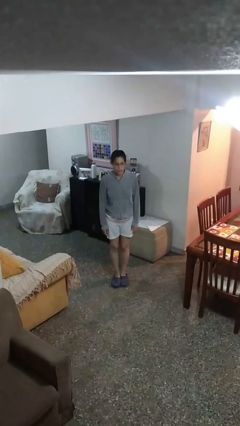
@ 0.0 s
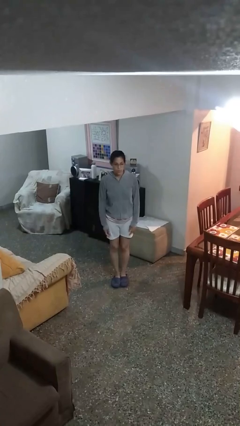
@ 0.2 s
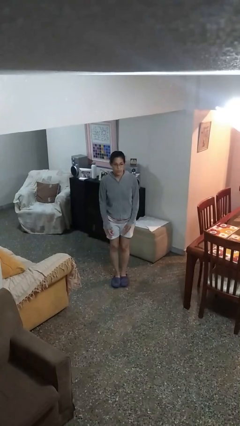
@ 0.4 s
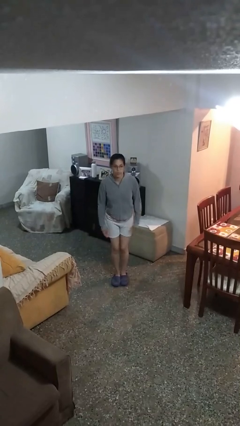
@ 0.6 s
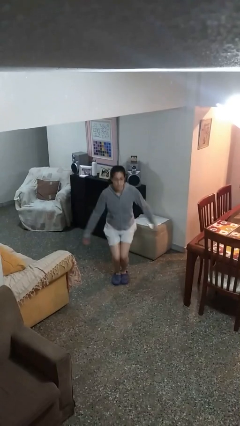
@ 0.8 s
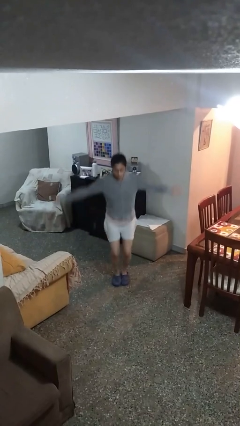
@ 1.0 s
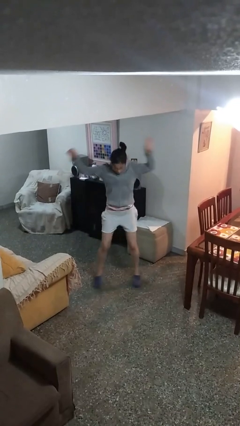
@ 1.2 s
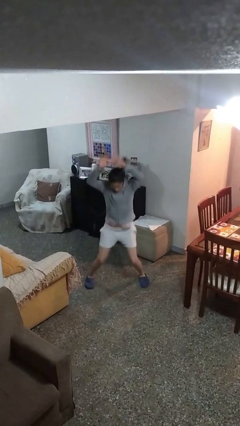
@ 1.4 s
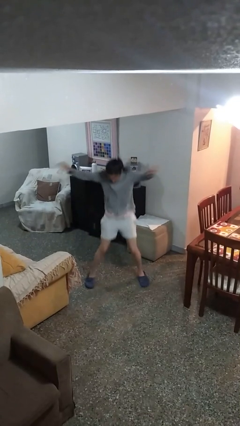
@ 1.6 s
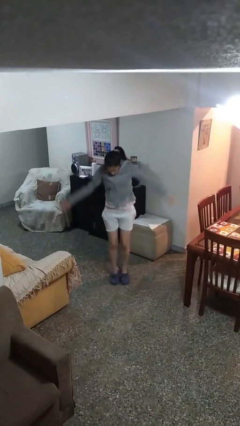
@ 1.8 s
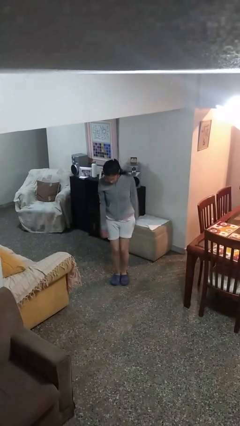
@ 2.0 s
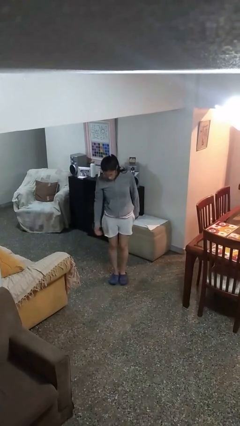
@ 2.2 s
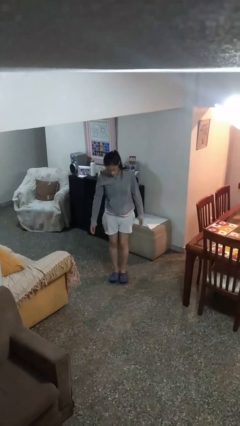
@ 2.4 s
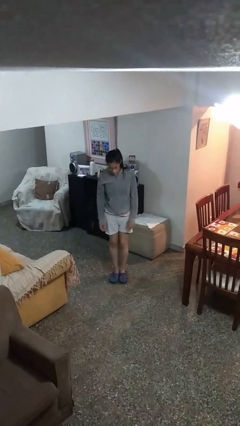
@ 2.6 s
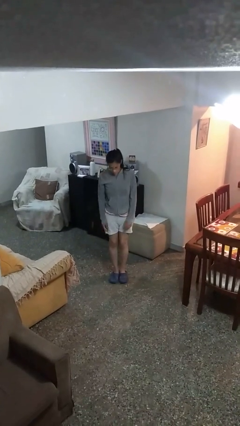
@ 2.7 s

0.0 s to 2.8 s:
person exercises with jumping jacks

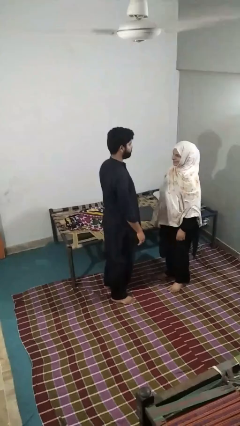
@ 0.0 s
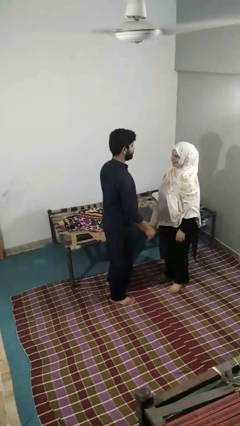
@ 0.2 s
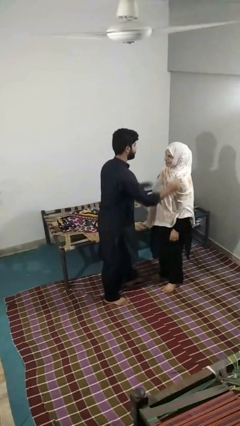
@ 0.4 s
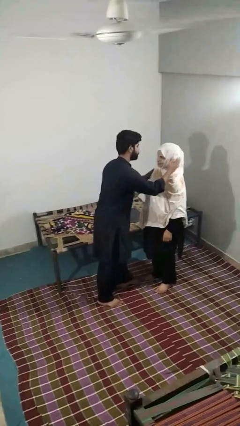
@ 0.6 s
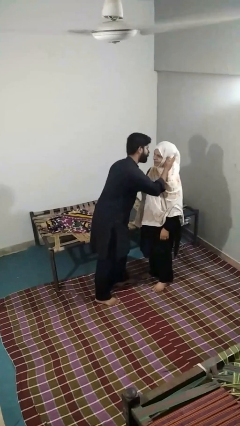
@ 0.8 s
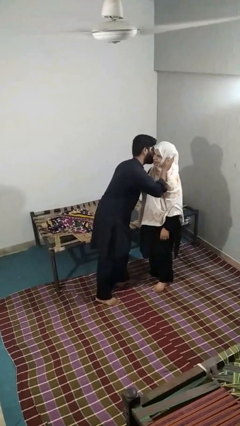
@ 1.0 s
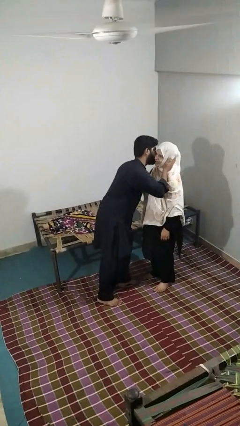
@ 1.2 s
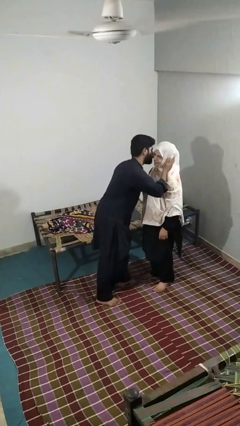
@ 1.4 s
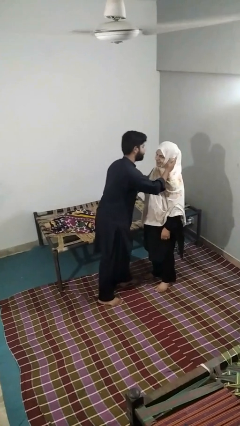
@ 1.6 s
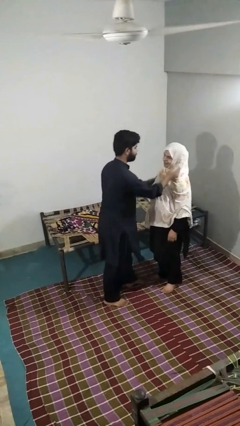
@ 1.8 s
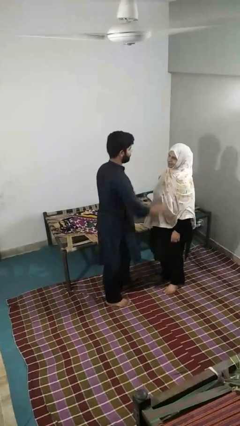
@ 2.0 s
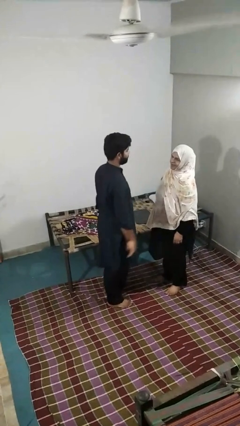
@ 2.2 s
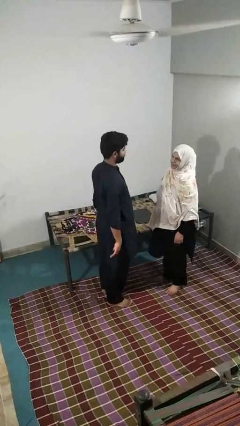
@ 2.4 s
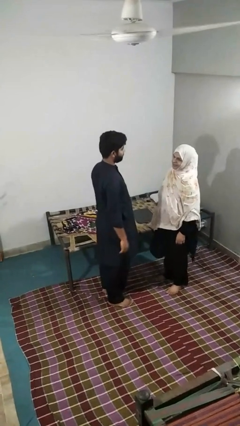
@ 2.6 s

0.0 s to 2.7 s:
person kisses cheek of person

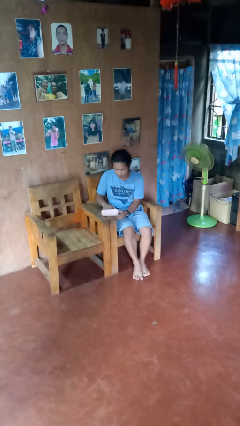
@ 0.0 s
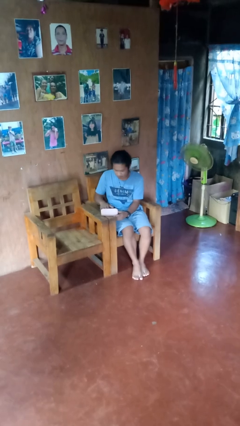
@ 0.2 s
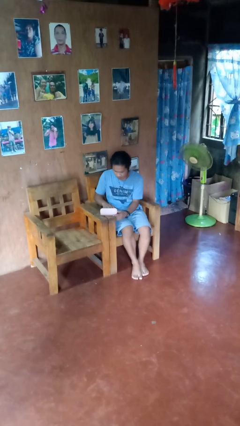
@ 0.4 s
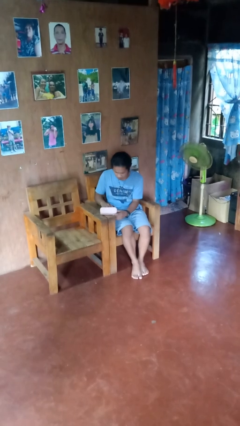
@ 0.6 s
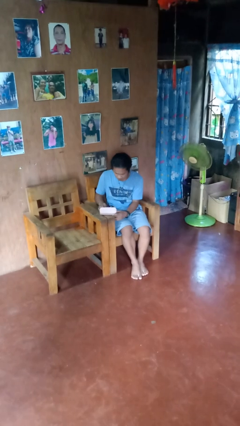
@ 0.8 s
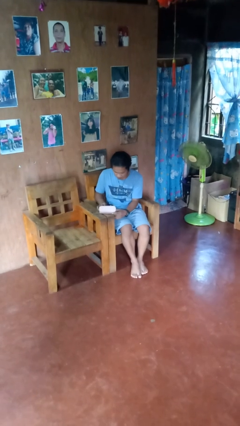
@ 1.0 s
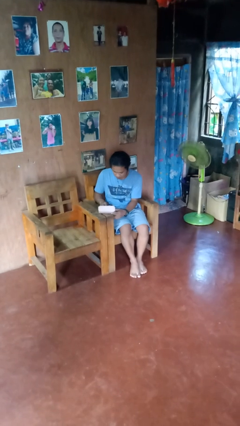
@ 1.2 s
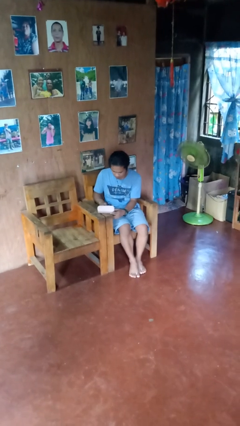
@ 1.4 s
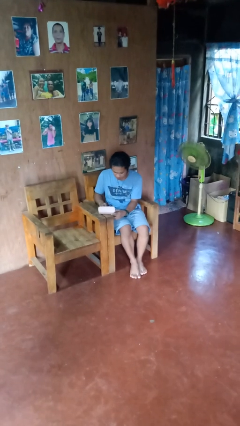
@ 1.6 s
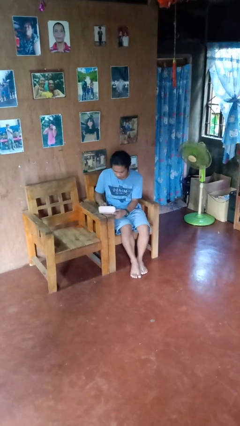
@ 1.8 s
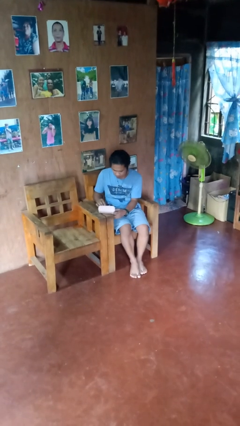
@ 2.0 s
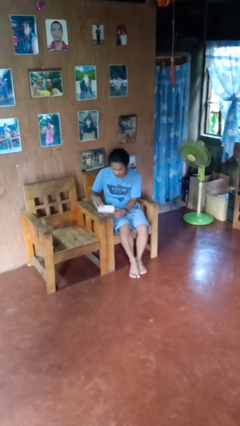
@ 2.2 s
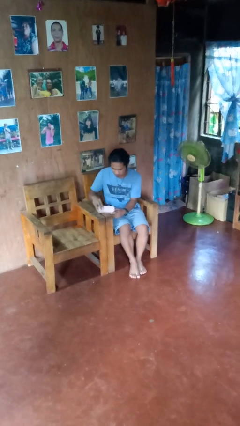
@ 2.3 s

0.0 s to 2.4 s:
person searches jewelry box

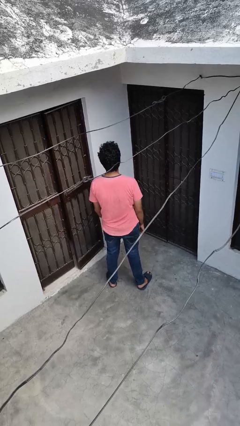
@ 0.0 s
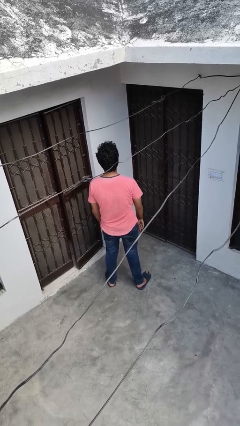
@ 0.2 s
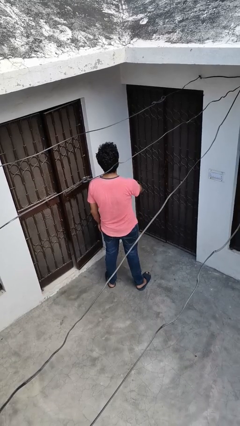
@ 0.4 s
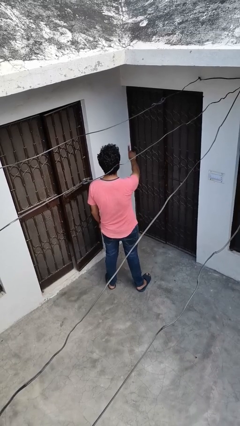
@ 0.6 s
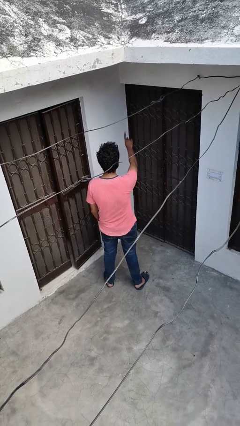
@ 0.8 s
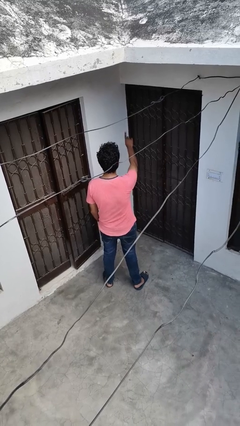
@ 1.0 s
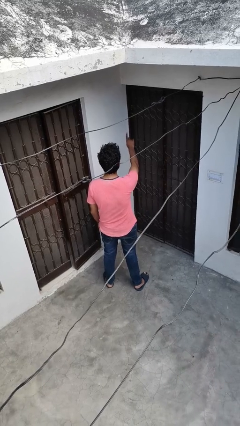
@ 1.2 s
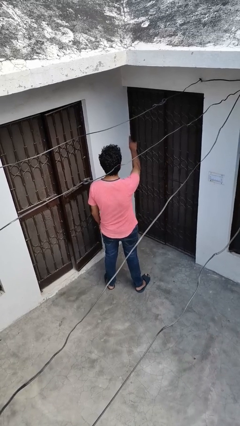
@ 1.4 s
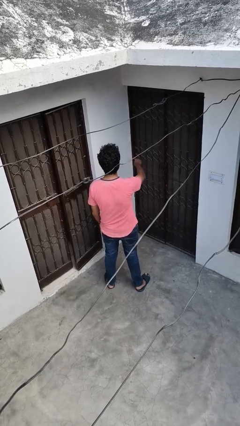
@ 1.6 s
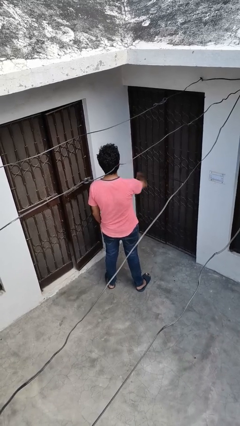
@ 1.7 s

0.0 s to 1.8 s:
person gestures number one

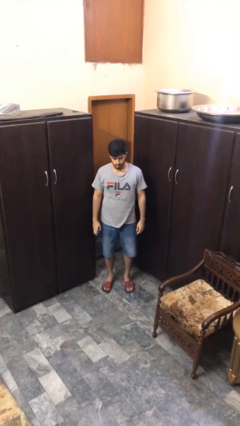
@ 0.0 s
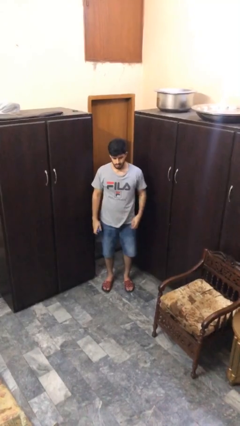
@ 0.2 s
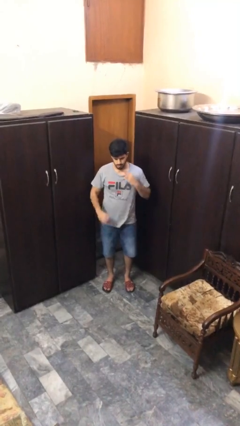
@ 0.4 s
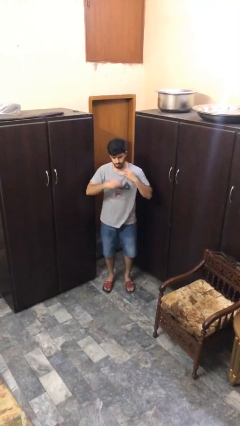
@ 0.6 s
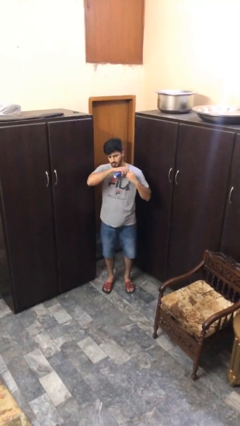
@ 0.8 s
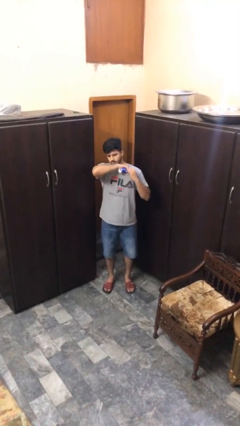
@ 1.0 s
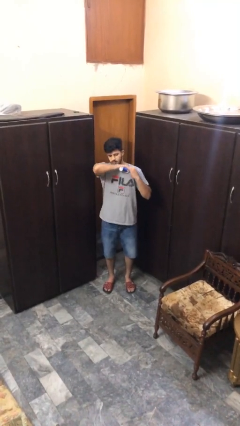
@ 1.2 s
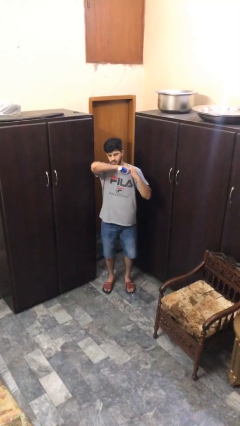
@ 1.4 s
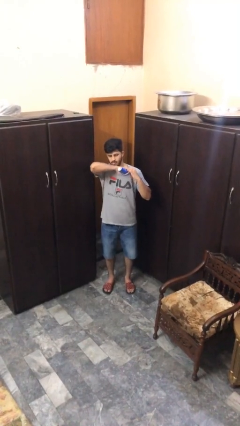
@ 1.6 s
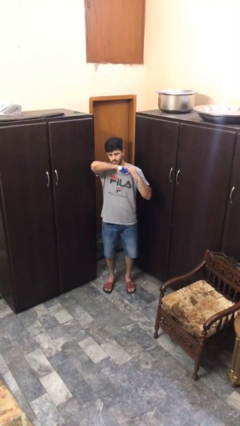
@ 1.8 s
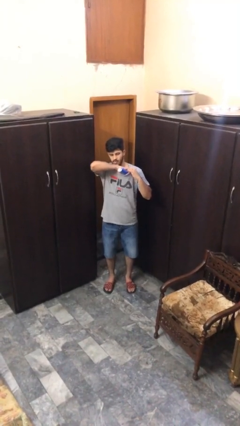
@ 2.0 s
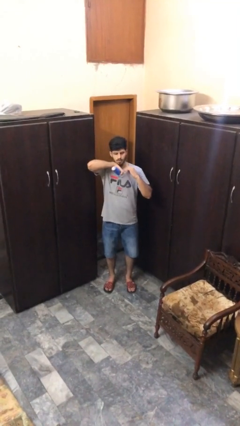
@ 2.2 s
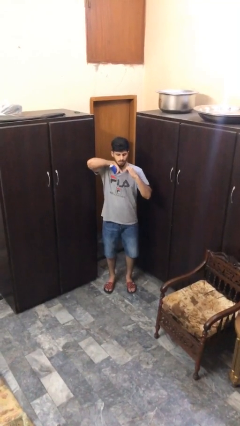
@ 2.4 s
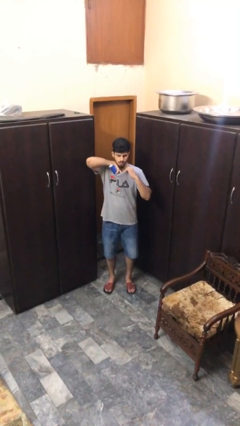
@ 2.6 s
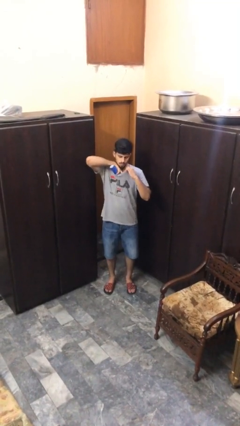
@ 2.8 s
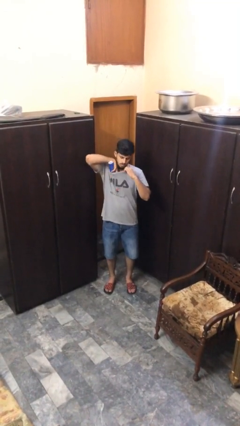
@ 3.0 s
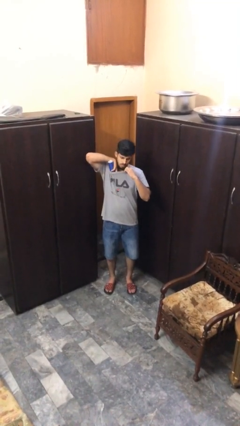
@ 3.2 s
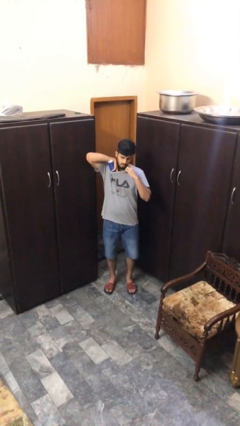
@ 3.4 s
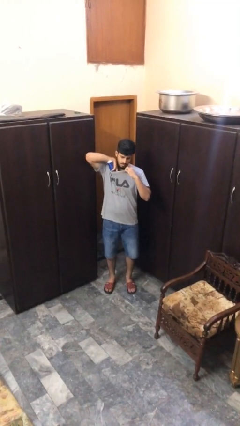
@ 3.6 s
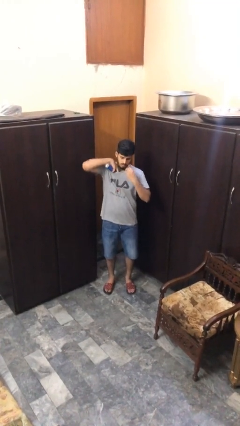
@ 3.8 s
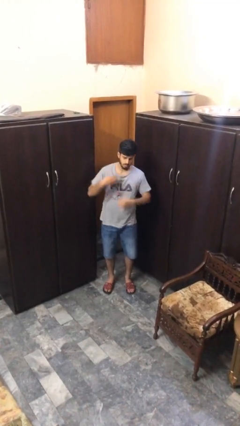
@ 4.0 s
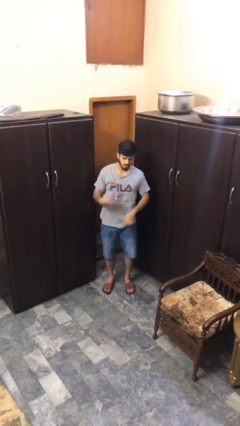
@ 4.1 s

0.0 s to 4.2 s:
person applies deodorant

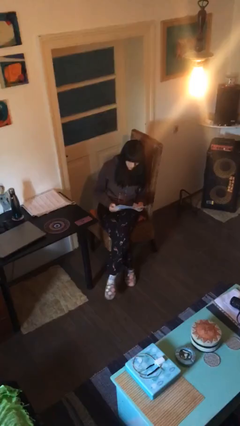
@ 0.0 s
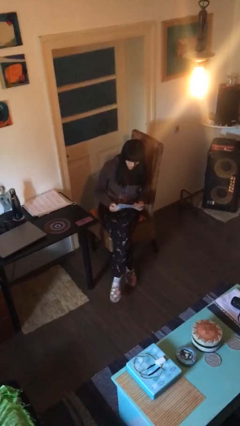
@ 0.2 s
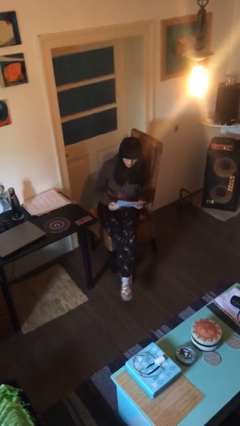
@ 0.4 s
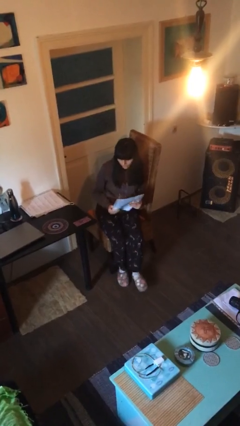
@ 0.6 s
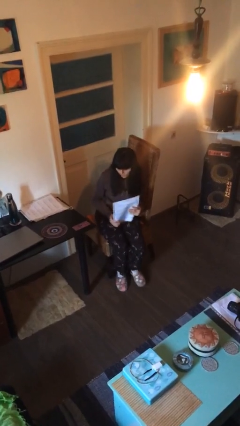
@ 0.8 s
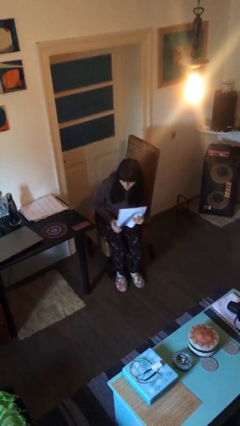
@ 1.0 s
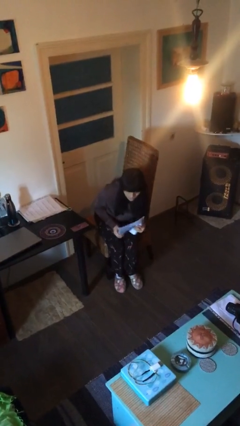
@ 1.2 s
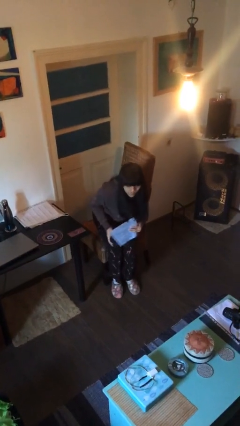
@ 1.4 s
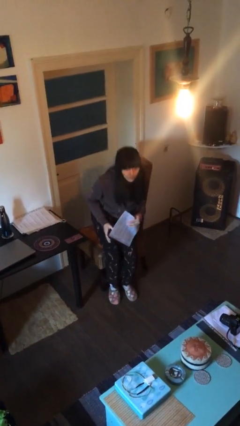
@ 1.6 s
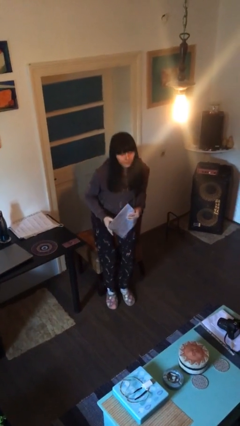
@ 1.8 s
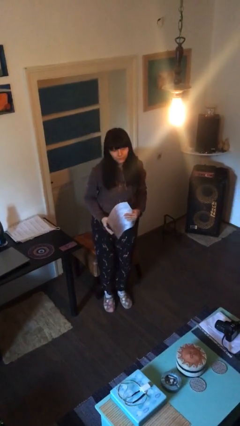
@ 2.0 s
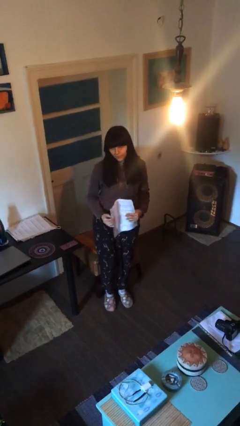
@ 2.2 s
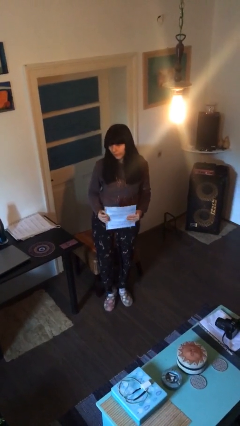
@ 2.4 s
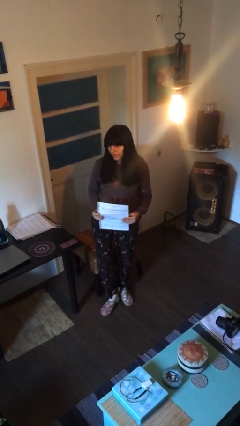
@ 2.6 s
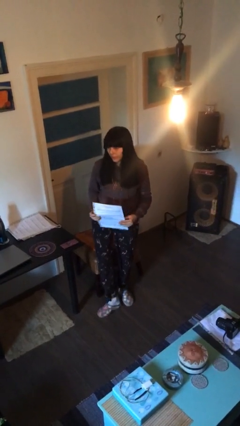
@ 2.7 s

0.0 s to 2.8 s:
person stands up

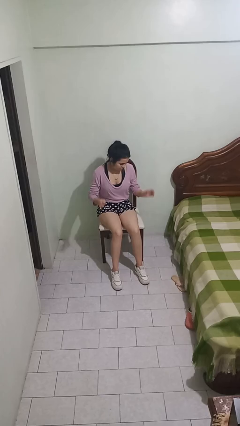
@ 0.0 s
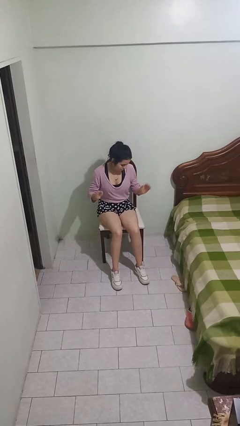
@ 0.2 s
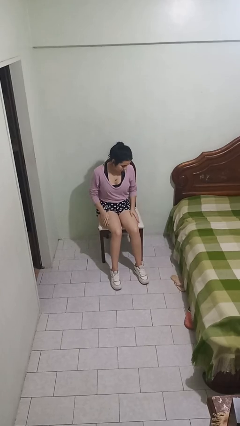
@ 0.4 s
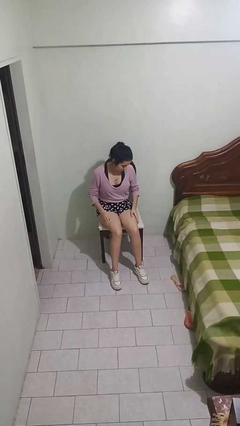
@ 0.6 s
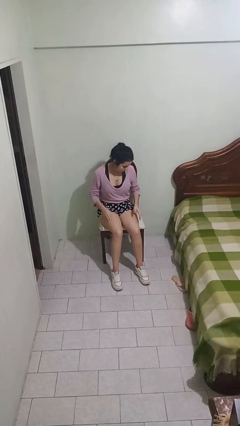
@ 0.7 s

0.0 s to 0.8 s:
person slaps hands on thighs
